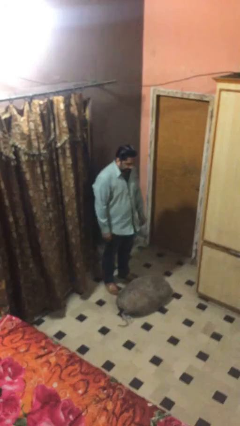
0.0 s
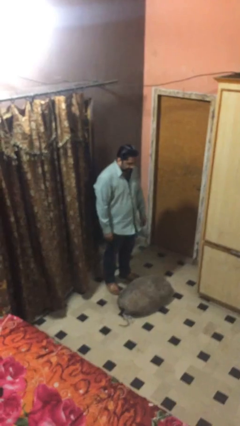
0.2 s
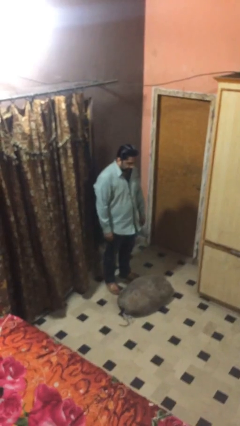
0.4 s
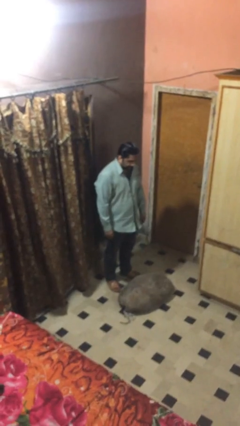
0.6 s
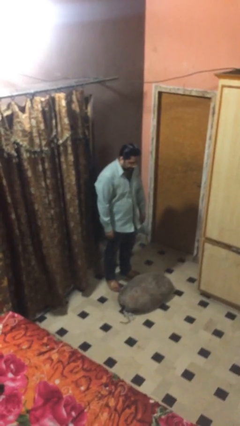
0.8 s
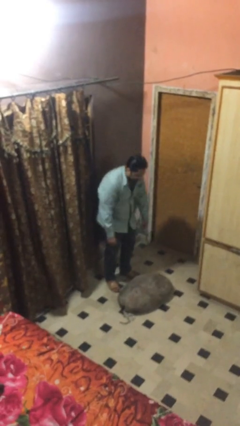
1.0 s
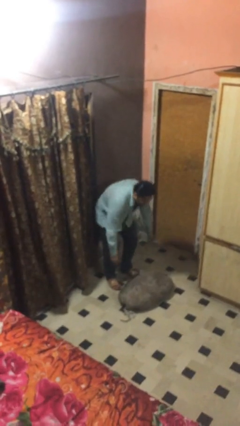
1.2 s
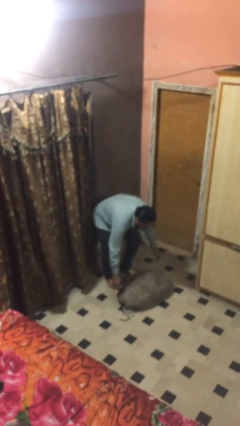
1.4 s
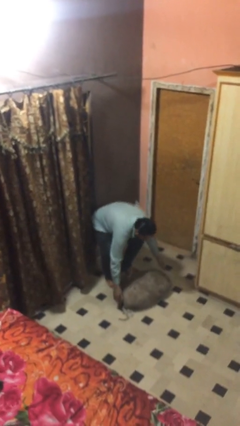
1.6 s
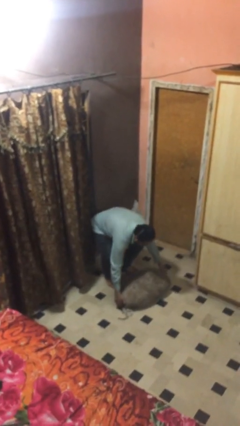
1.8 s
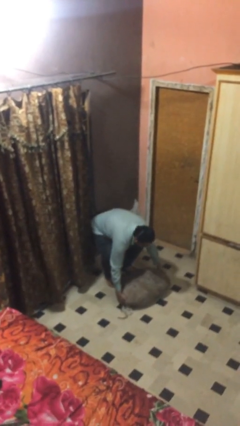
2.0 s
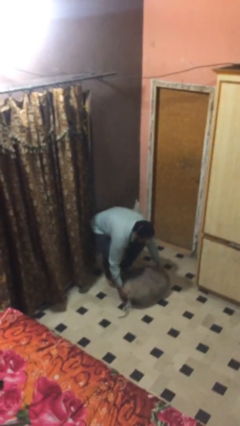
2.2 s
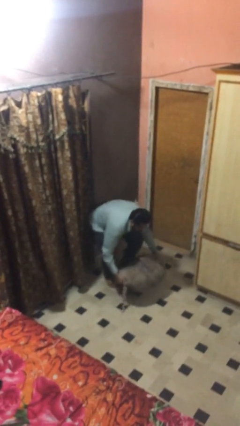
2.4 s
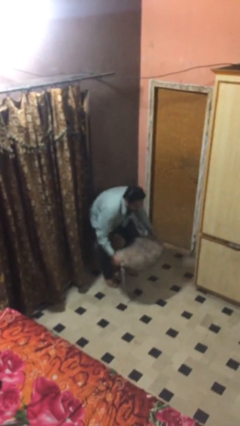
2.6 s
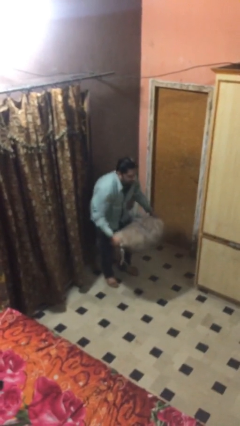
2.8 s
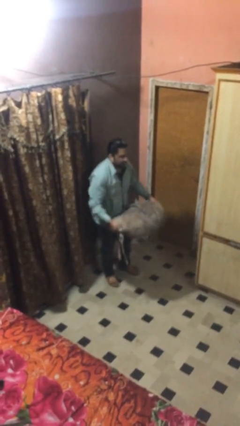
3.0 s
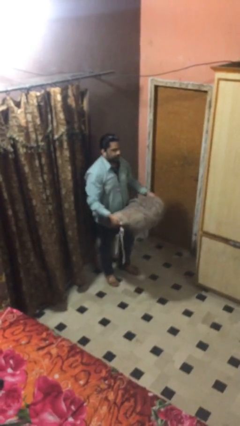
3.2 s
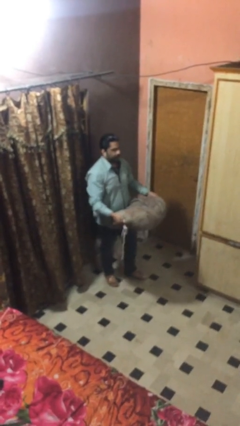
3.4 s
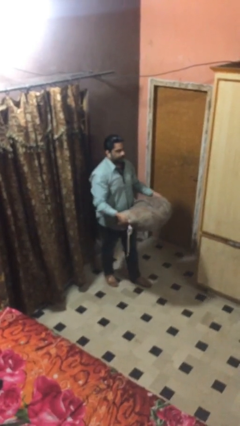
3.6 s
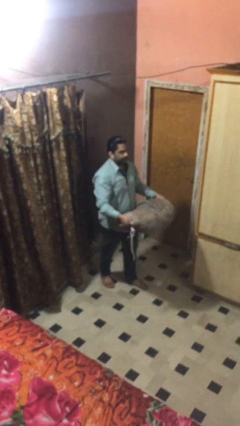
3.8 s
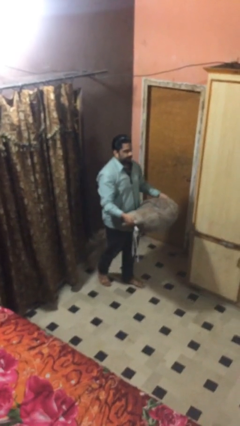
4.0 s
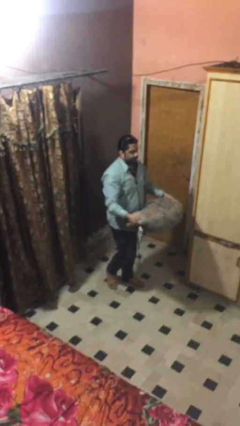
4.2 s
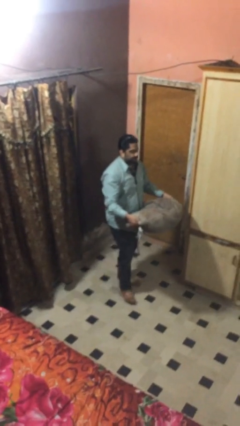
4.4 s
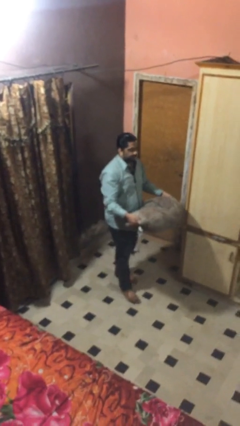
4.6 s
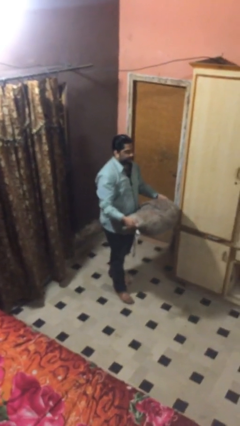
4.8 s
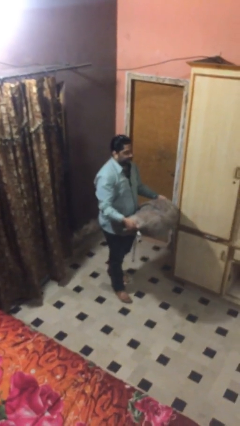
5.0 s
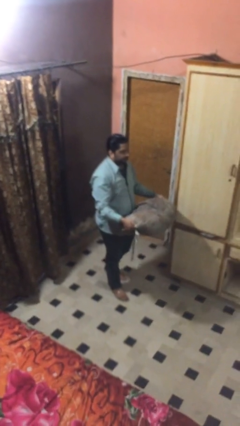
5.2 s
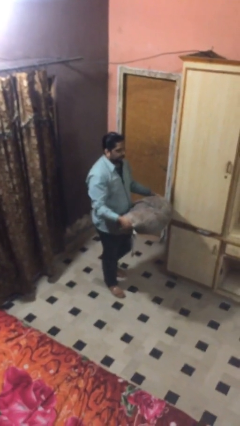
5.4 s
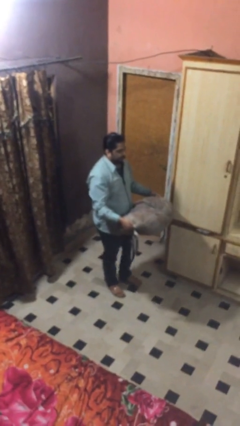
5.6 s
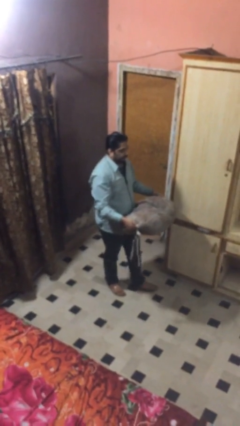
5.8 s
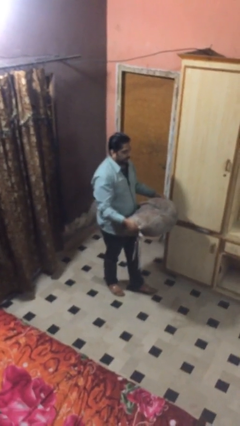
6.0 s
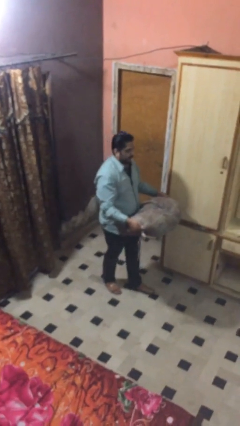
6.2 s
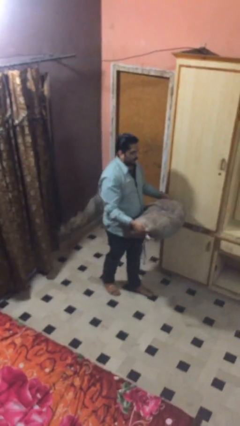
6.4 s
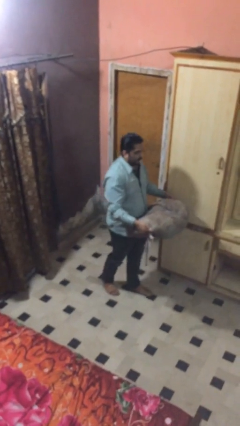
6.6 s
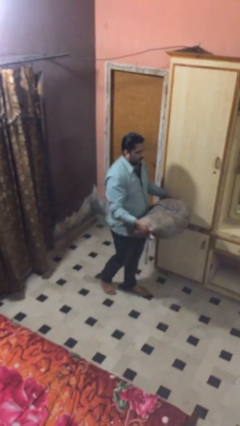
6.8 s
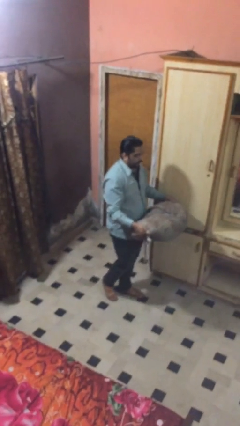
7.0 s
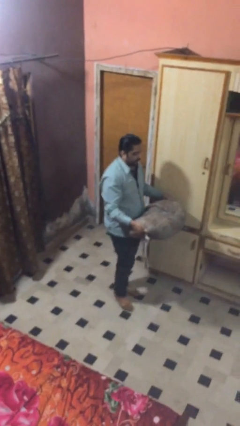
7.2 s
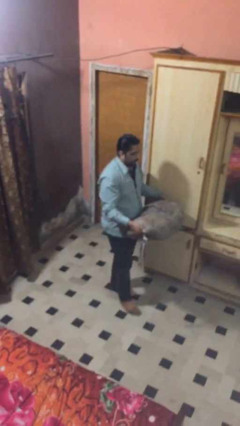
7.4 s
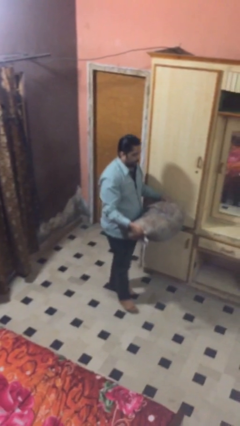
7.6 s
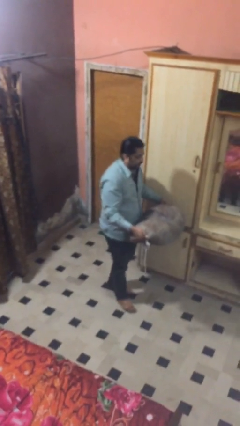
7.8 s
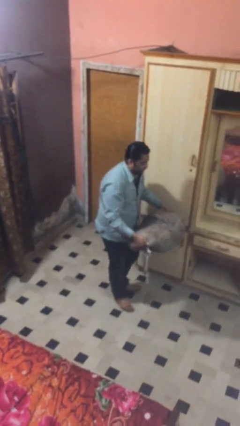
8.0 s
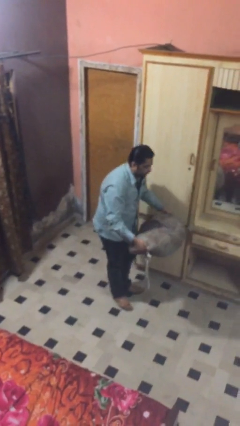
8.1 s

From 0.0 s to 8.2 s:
person carries heavy object

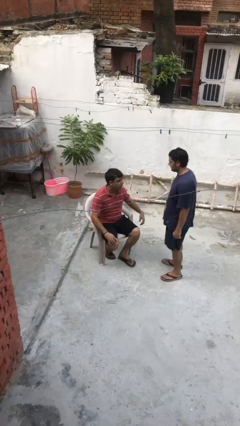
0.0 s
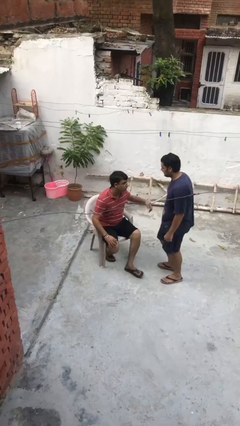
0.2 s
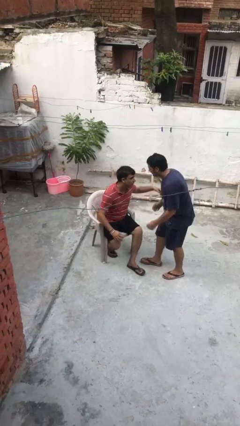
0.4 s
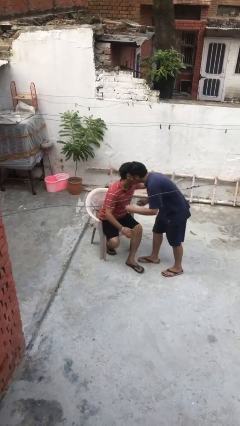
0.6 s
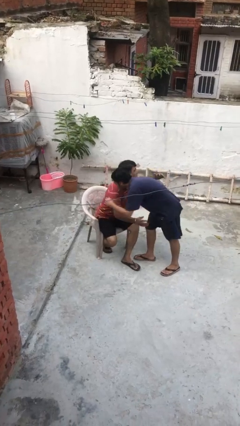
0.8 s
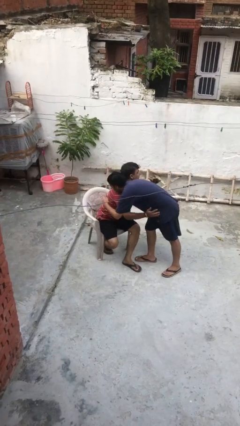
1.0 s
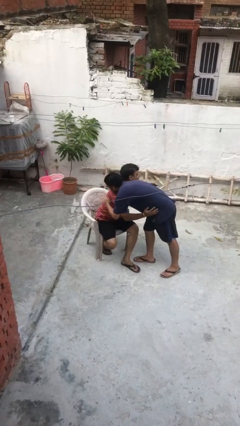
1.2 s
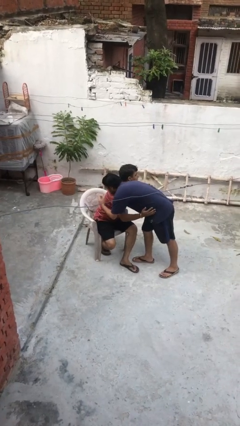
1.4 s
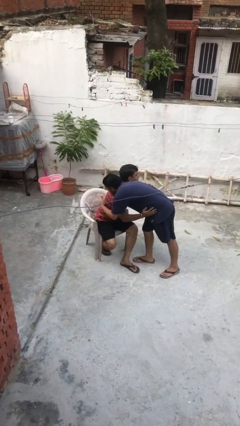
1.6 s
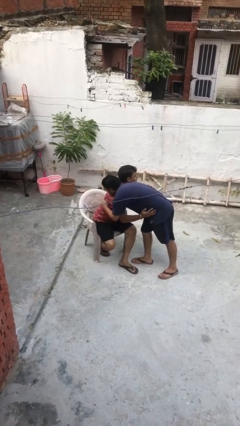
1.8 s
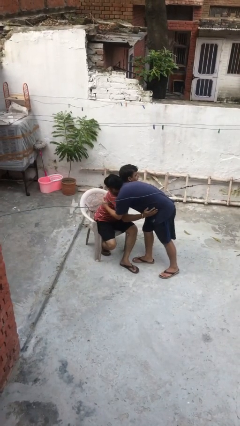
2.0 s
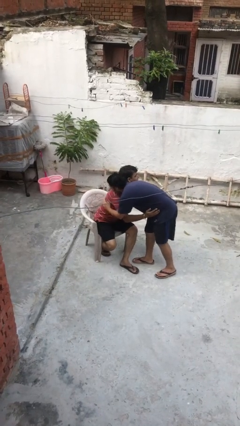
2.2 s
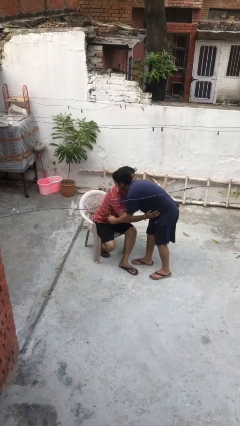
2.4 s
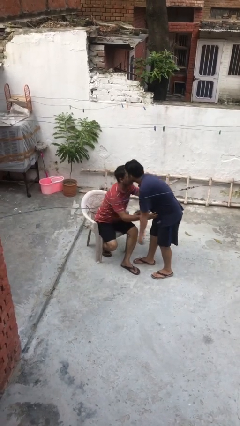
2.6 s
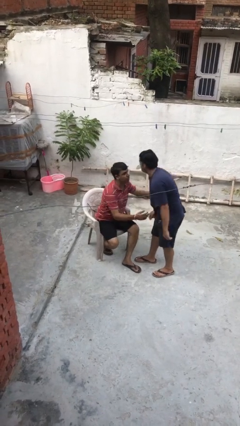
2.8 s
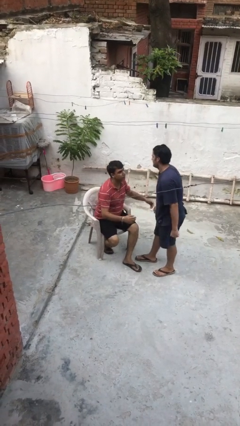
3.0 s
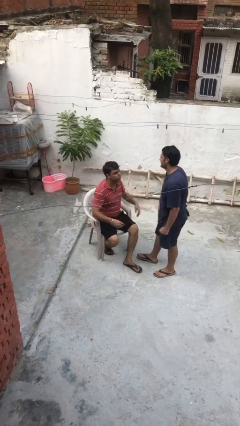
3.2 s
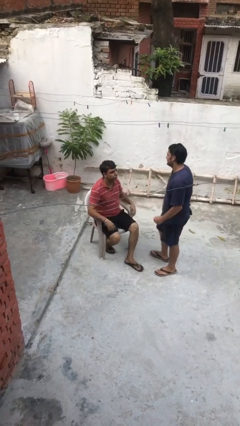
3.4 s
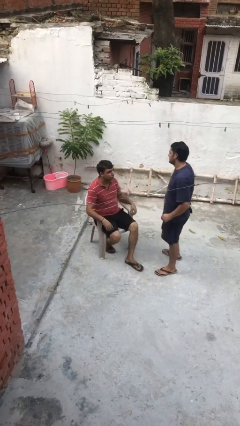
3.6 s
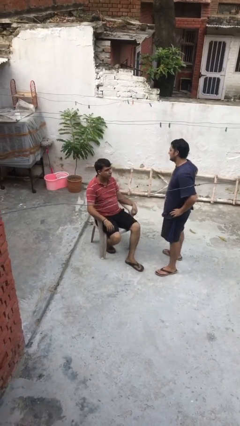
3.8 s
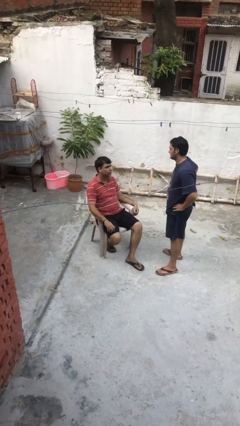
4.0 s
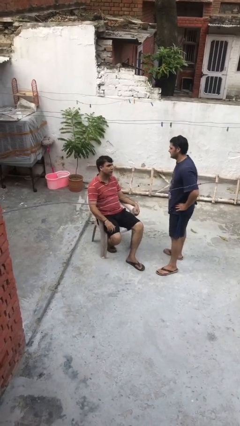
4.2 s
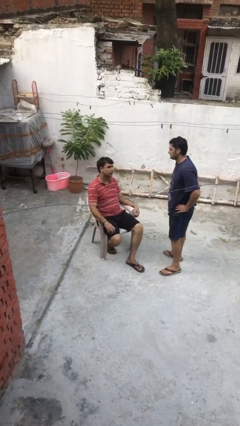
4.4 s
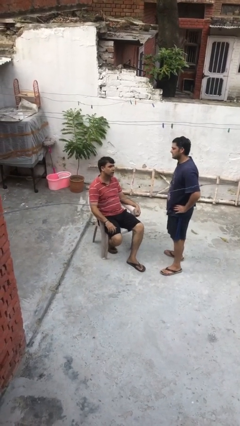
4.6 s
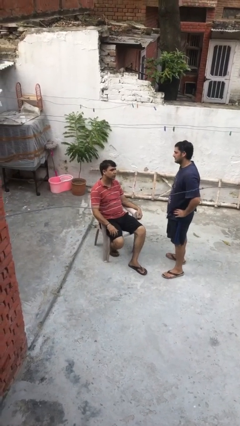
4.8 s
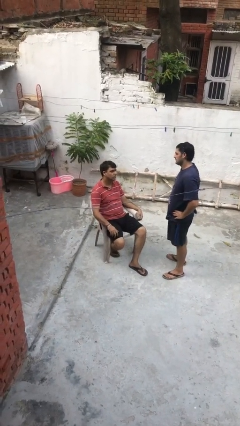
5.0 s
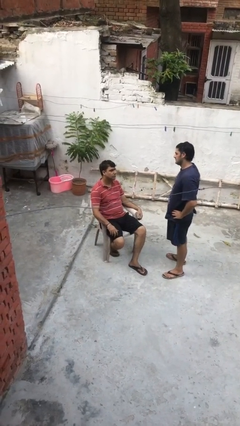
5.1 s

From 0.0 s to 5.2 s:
person embraces person

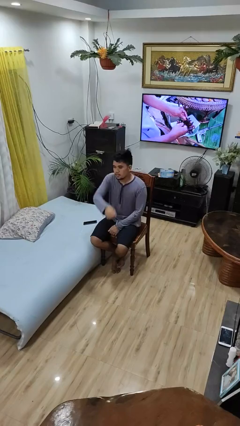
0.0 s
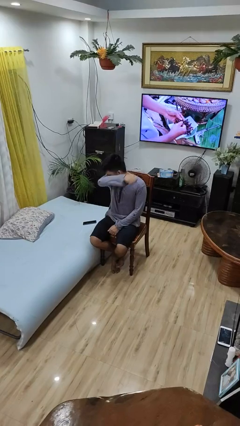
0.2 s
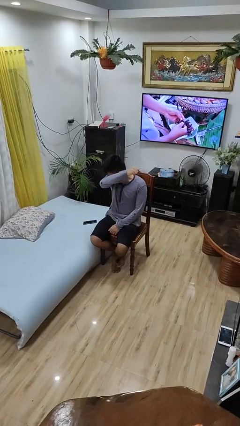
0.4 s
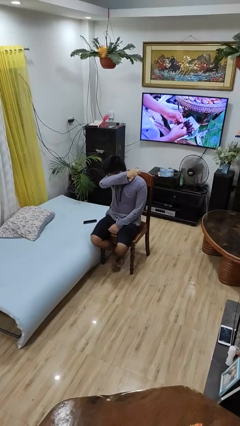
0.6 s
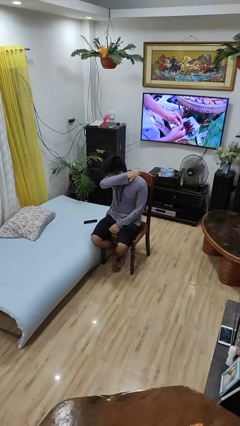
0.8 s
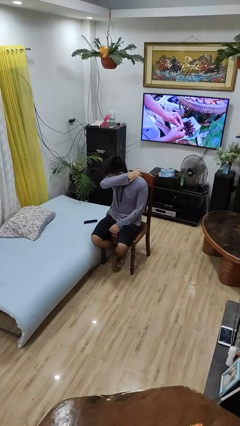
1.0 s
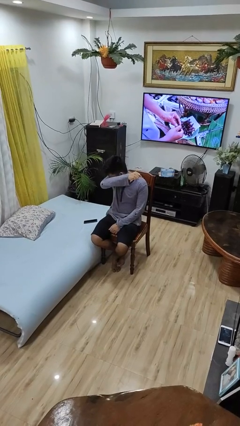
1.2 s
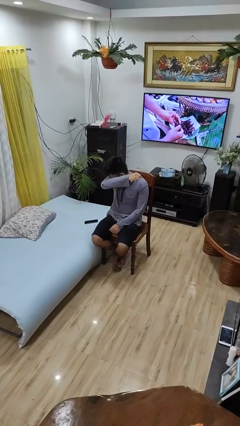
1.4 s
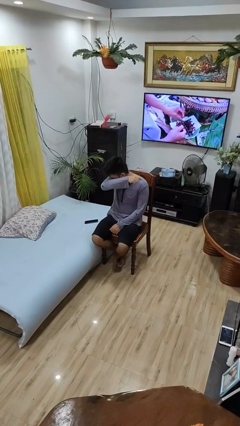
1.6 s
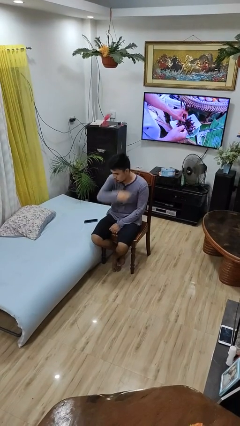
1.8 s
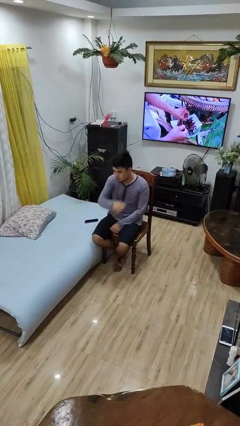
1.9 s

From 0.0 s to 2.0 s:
person sneezes into arm

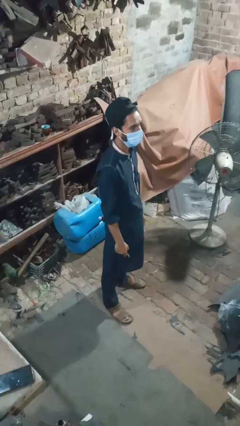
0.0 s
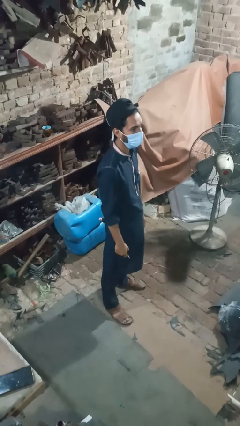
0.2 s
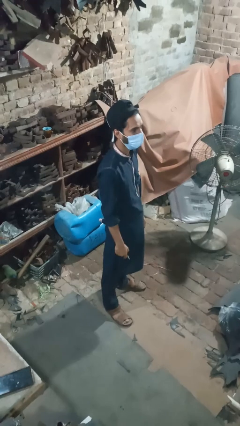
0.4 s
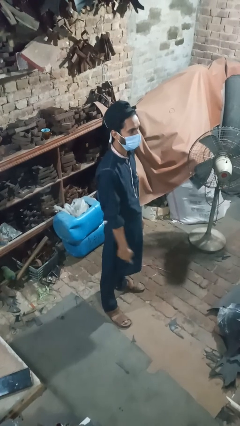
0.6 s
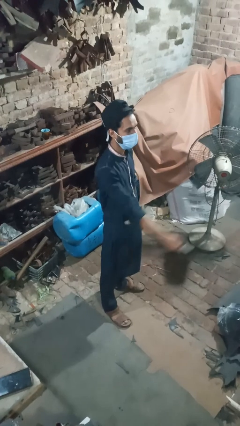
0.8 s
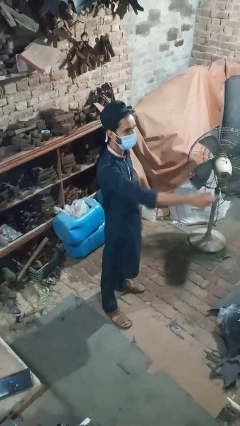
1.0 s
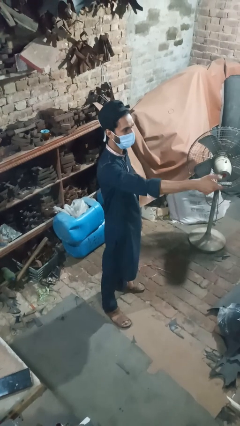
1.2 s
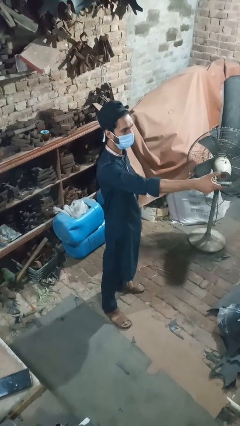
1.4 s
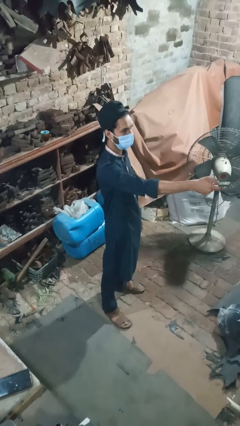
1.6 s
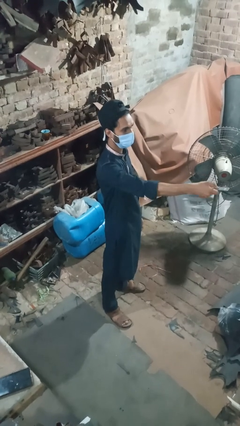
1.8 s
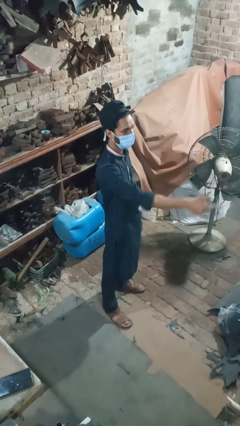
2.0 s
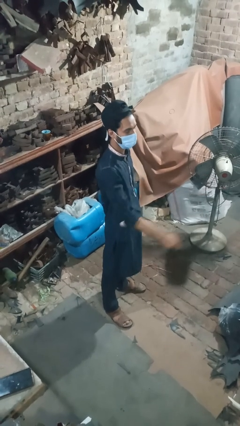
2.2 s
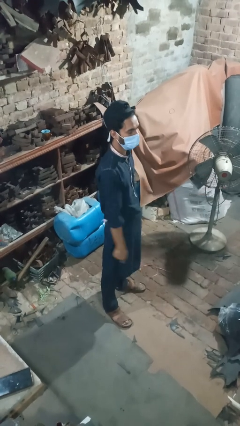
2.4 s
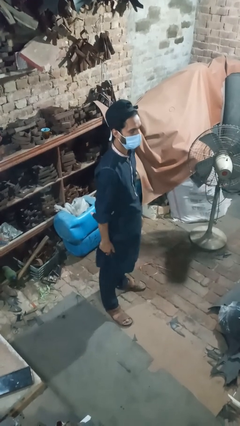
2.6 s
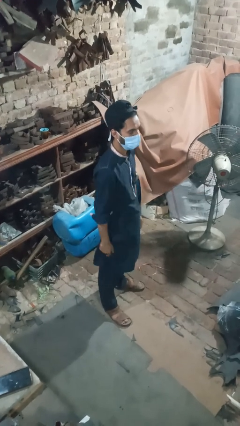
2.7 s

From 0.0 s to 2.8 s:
person uses television remote
